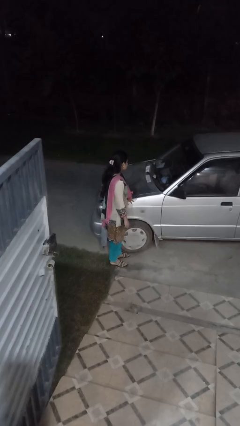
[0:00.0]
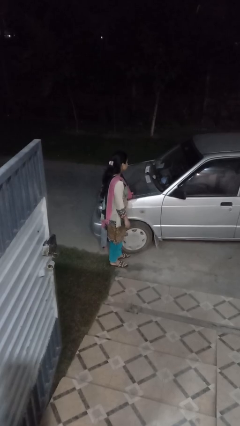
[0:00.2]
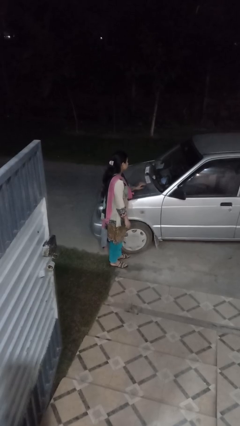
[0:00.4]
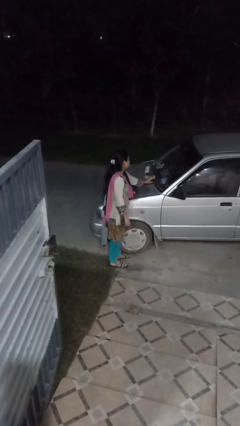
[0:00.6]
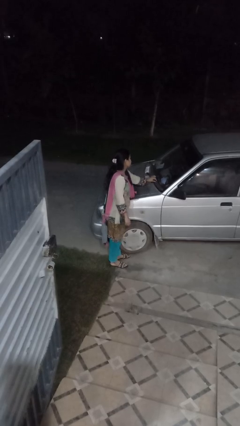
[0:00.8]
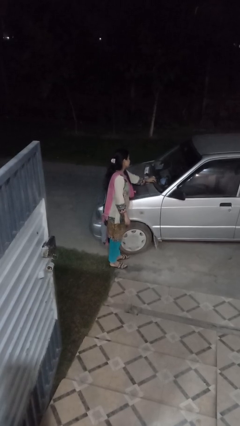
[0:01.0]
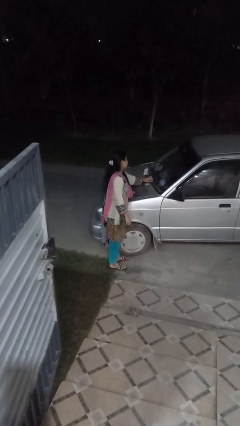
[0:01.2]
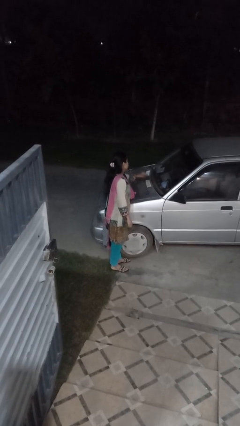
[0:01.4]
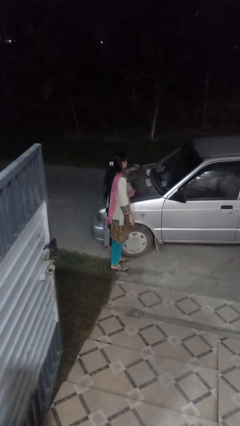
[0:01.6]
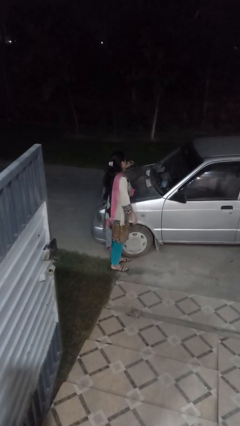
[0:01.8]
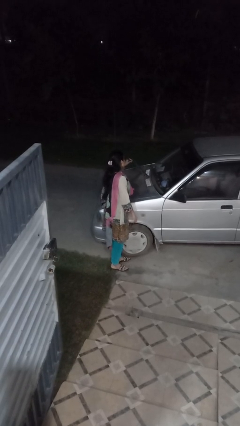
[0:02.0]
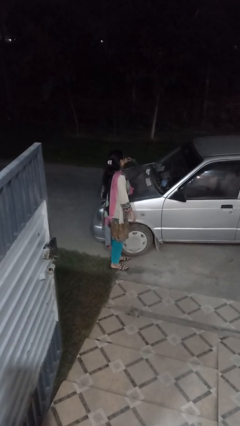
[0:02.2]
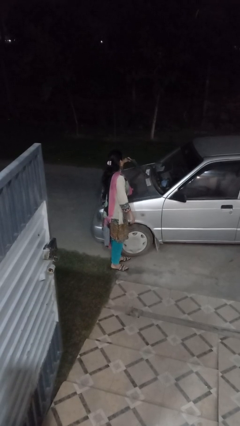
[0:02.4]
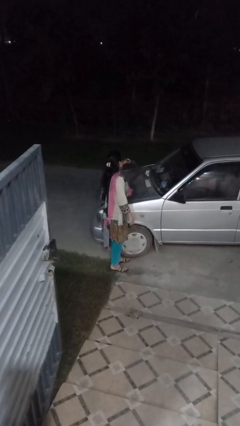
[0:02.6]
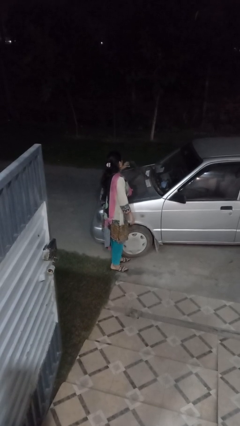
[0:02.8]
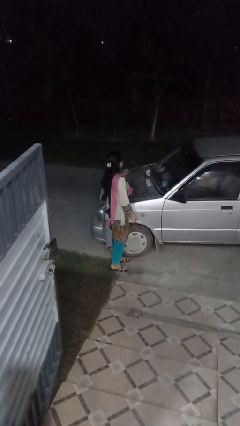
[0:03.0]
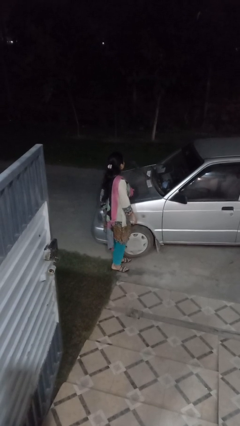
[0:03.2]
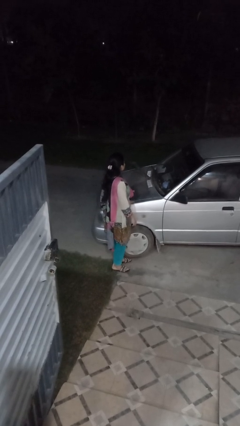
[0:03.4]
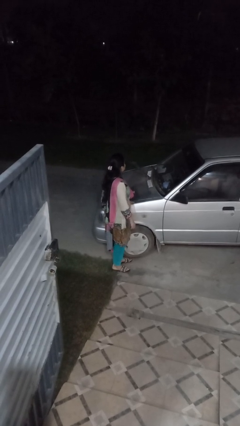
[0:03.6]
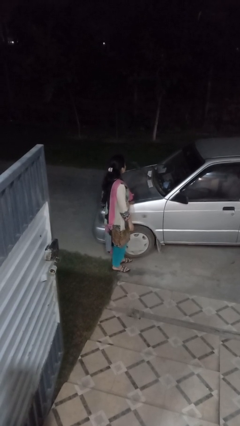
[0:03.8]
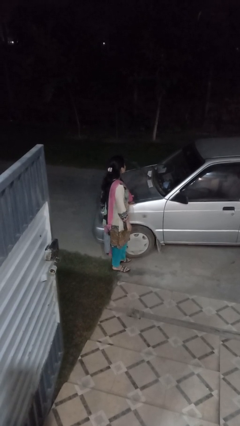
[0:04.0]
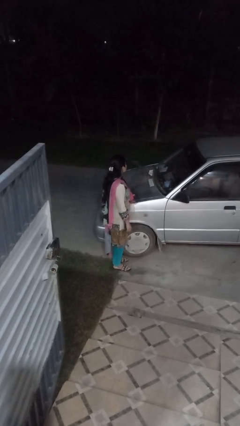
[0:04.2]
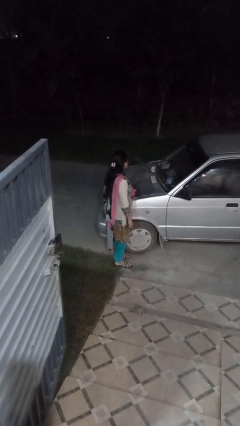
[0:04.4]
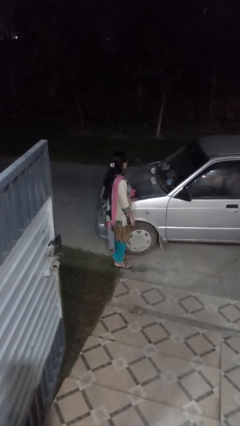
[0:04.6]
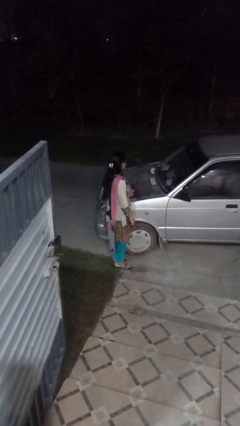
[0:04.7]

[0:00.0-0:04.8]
person flips up car wipers

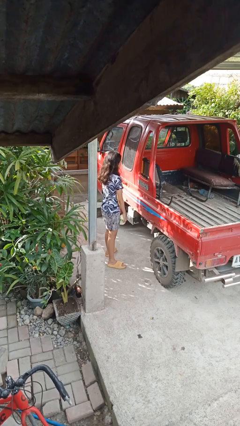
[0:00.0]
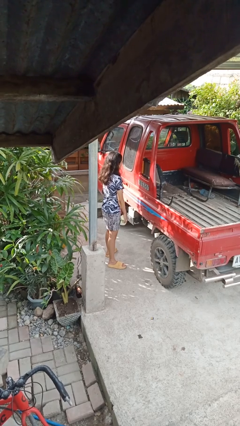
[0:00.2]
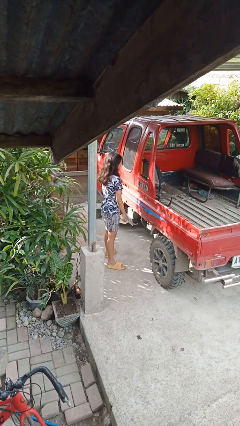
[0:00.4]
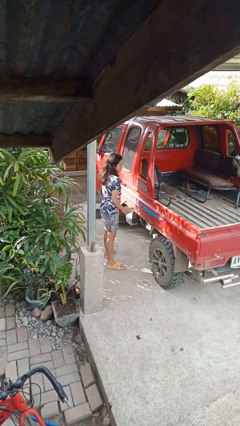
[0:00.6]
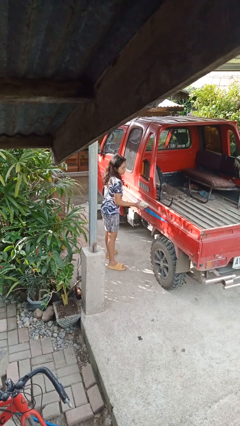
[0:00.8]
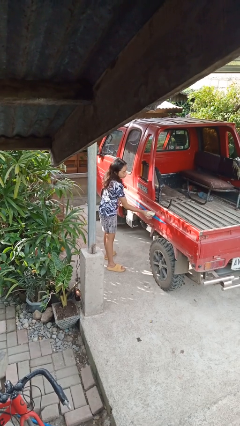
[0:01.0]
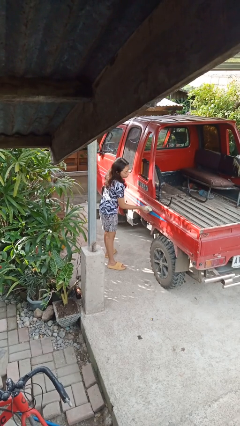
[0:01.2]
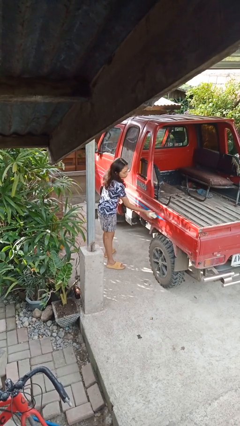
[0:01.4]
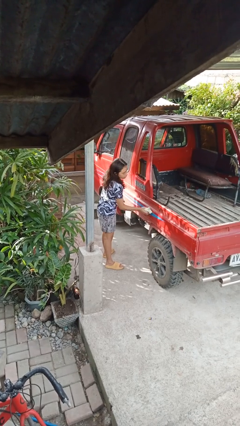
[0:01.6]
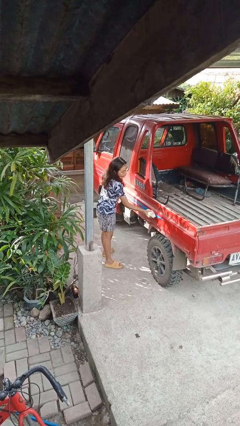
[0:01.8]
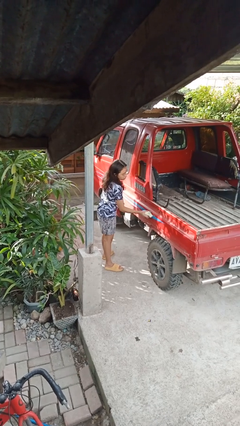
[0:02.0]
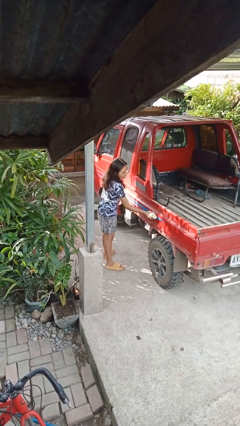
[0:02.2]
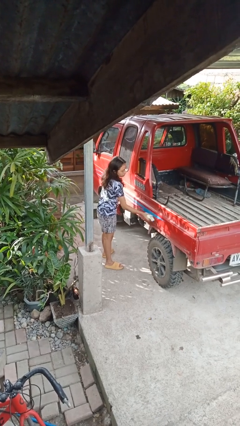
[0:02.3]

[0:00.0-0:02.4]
person polishes car with rag

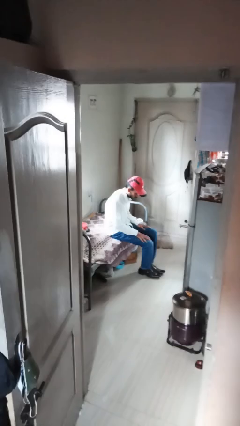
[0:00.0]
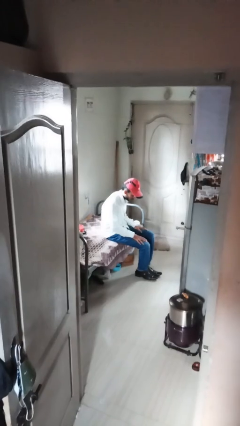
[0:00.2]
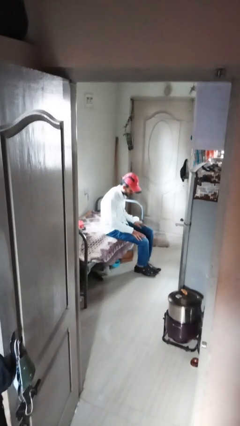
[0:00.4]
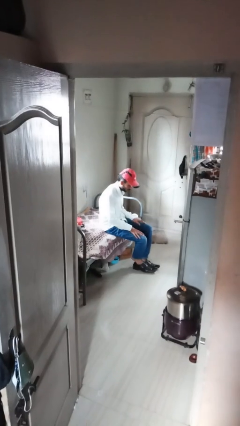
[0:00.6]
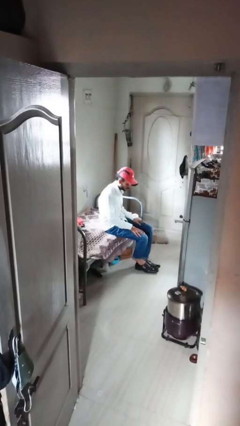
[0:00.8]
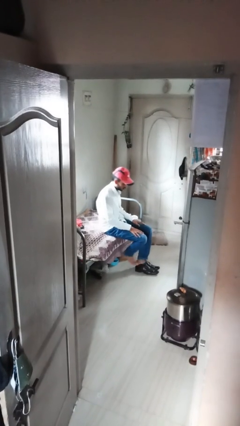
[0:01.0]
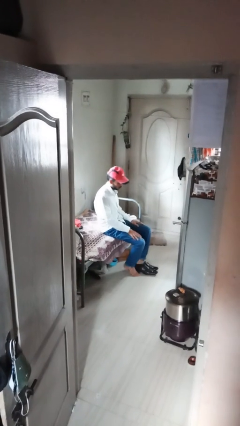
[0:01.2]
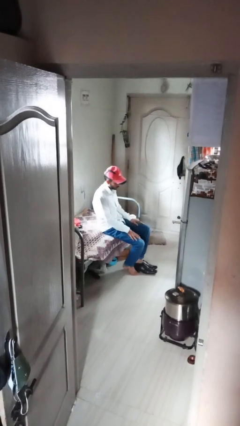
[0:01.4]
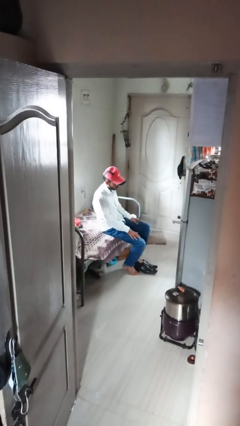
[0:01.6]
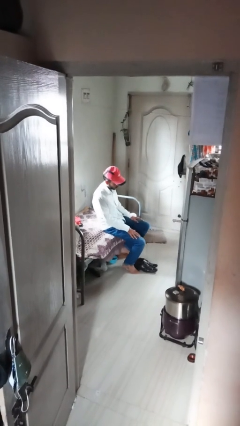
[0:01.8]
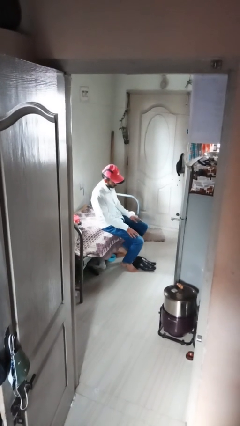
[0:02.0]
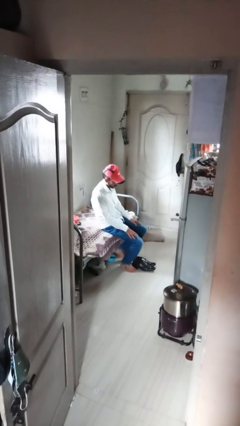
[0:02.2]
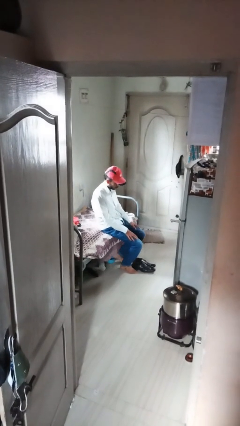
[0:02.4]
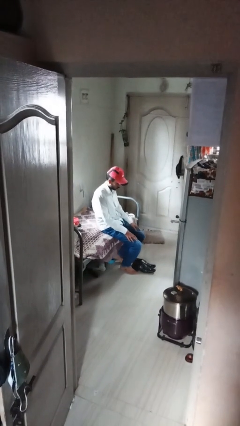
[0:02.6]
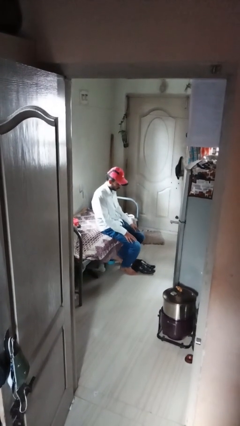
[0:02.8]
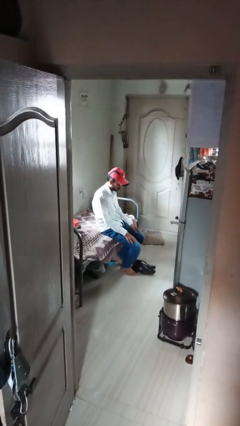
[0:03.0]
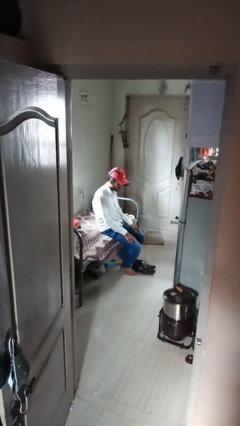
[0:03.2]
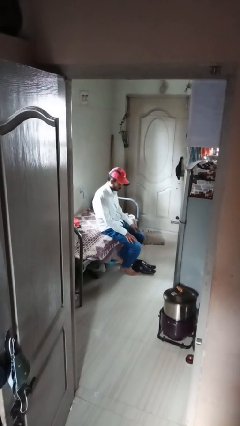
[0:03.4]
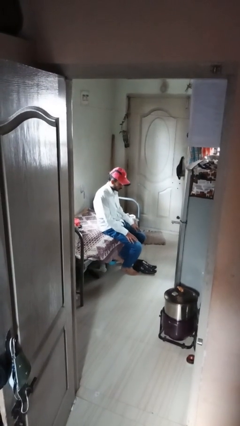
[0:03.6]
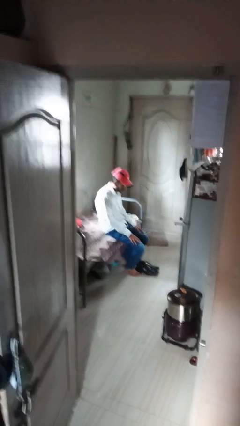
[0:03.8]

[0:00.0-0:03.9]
person takes off shoes

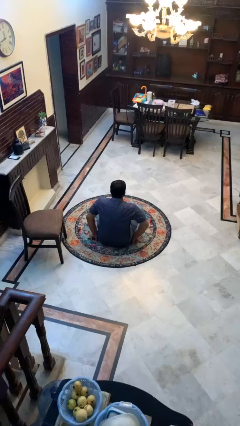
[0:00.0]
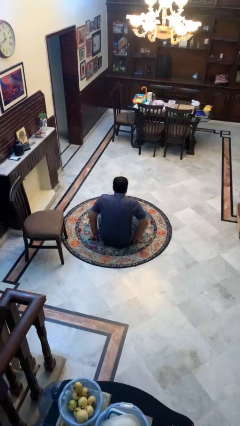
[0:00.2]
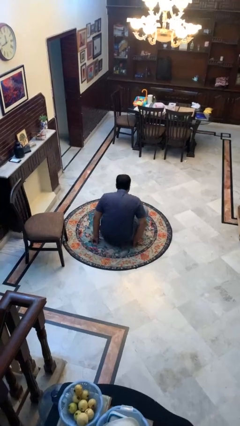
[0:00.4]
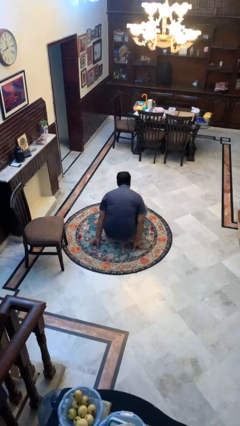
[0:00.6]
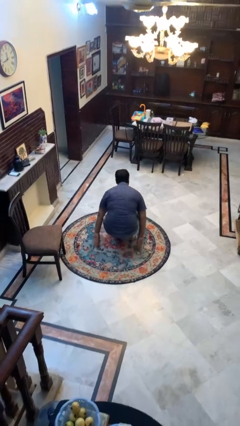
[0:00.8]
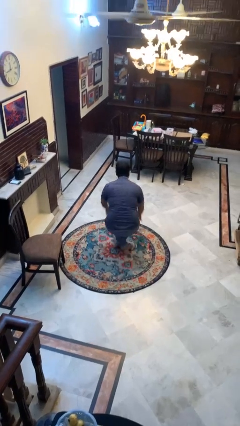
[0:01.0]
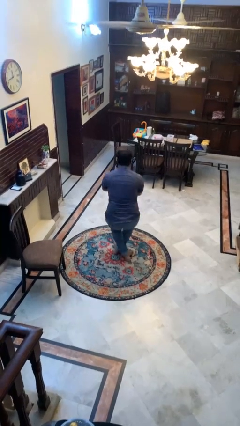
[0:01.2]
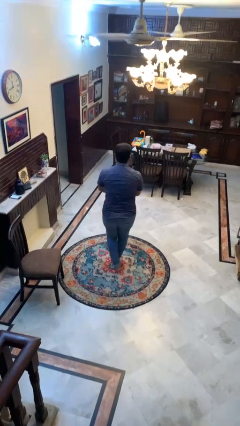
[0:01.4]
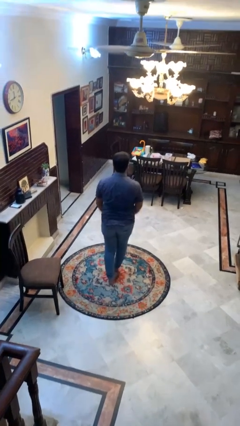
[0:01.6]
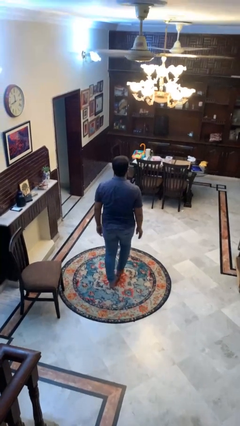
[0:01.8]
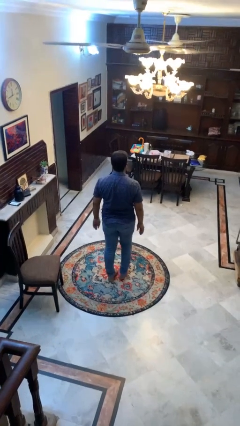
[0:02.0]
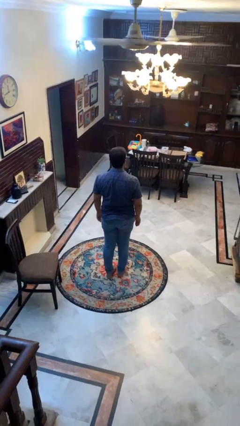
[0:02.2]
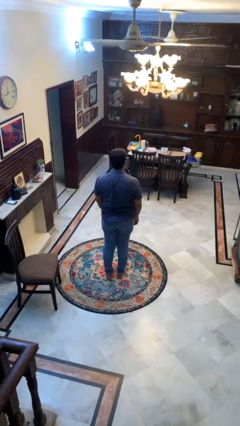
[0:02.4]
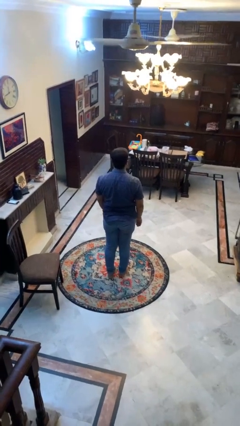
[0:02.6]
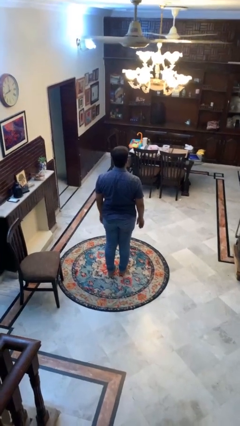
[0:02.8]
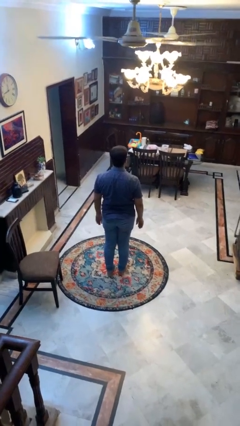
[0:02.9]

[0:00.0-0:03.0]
person stands up from floor

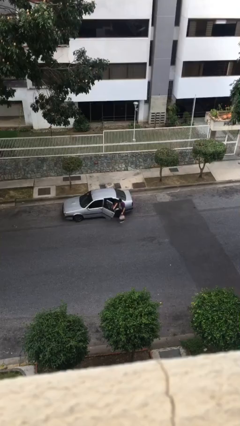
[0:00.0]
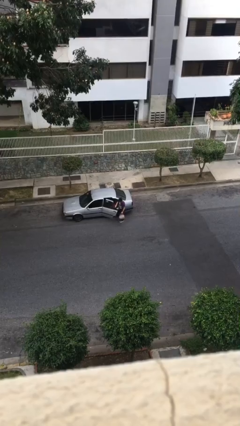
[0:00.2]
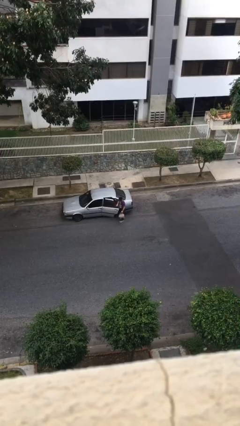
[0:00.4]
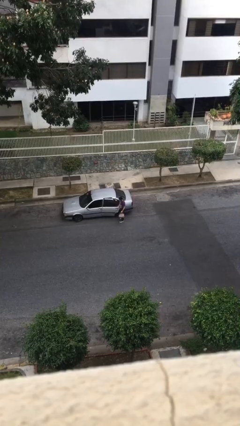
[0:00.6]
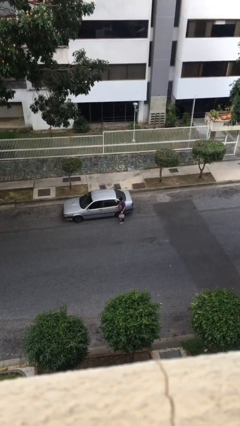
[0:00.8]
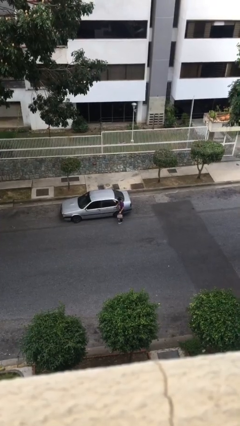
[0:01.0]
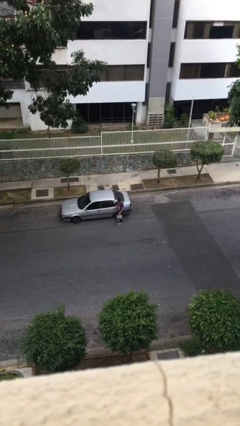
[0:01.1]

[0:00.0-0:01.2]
person closes car door

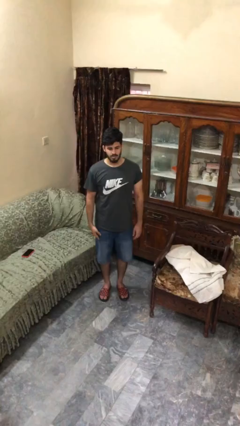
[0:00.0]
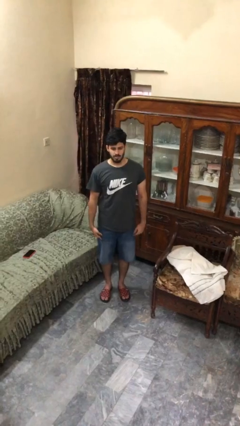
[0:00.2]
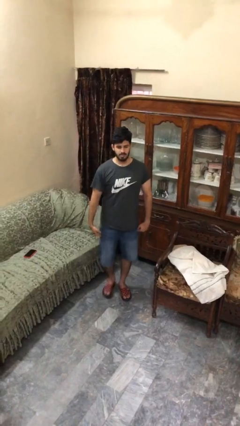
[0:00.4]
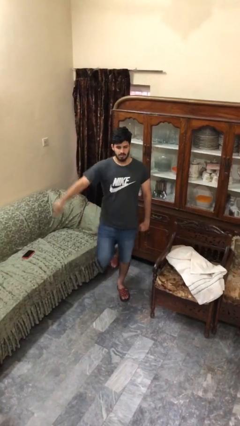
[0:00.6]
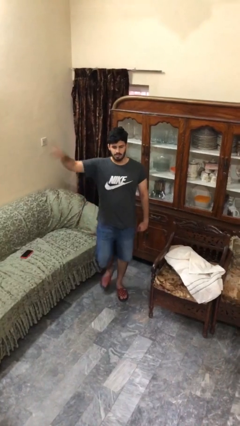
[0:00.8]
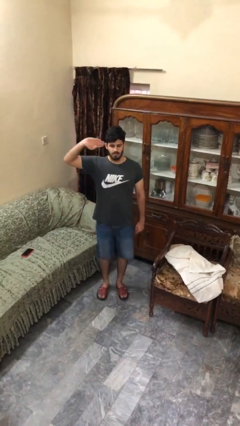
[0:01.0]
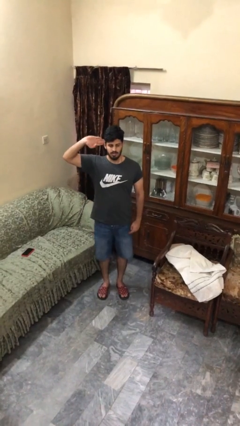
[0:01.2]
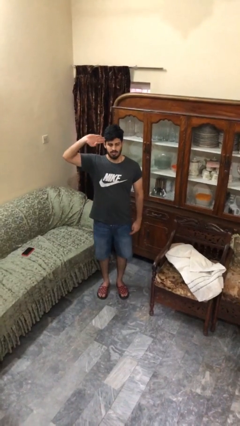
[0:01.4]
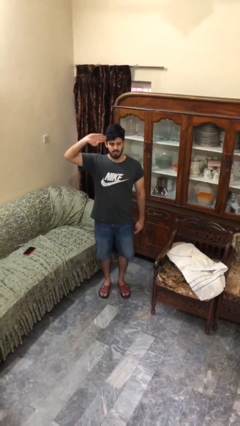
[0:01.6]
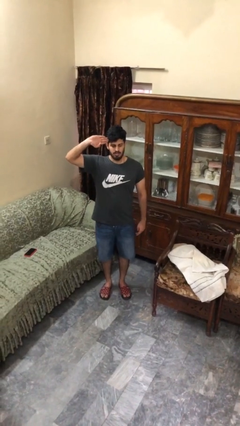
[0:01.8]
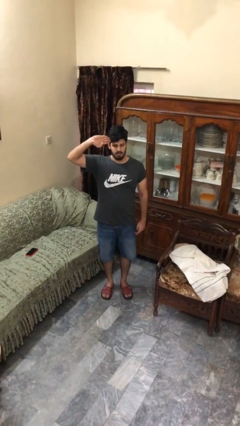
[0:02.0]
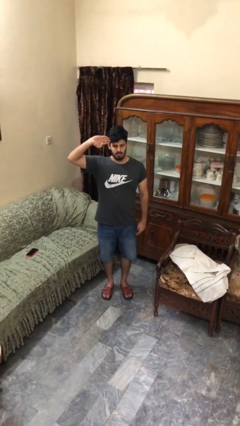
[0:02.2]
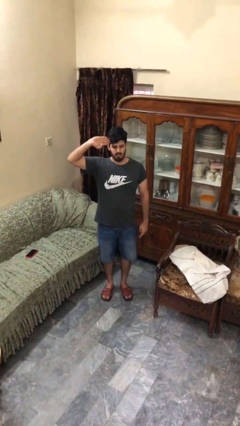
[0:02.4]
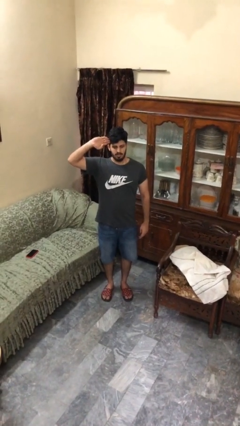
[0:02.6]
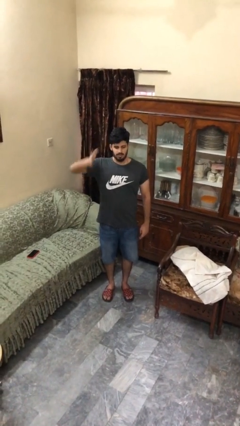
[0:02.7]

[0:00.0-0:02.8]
person salutes
